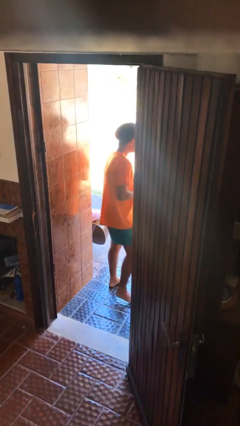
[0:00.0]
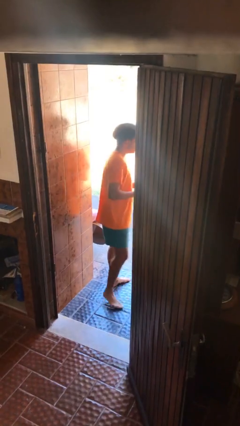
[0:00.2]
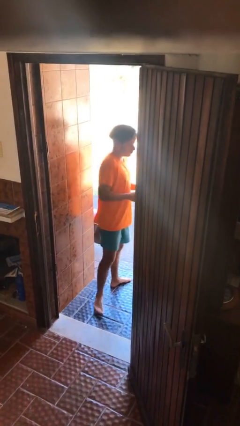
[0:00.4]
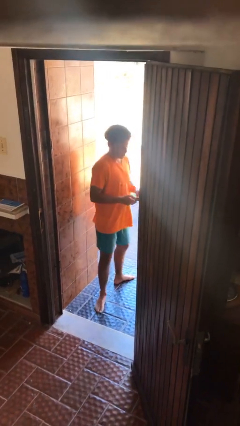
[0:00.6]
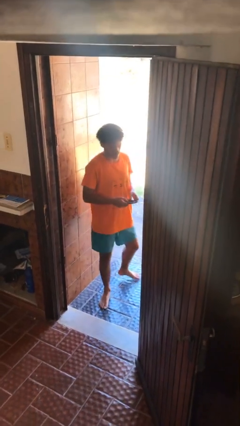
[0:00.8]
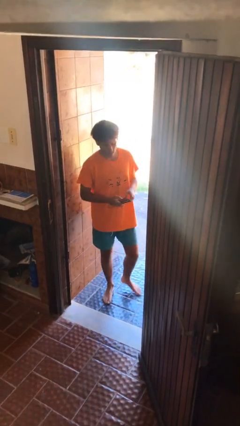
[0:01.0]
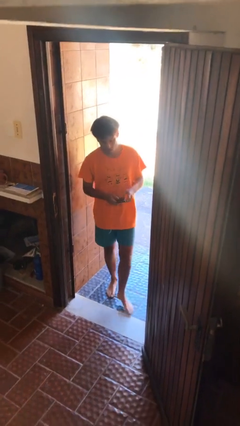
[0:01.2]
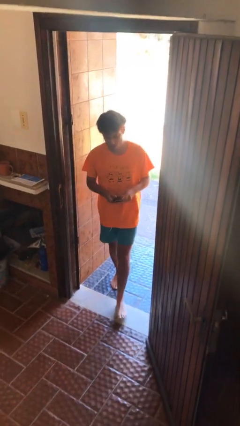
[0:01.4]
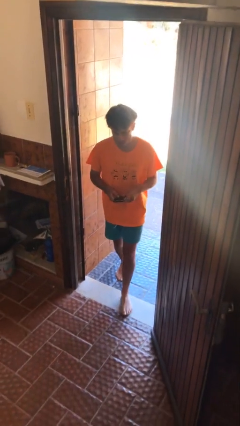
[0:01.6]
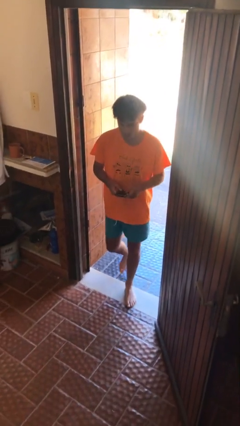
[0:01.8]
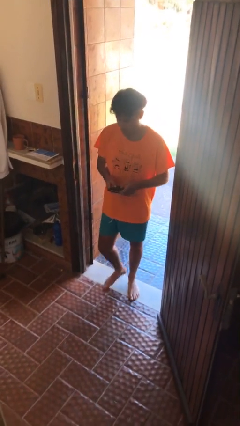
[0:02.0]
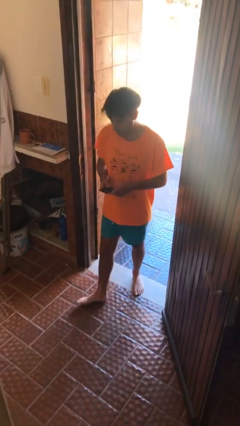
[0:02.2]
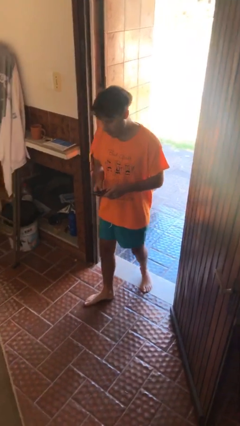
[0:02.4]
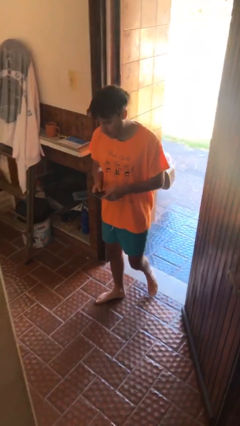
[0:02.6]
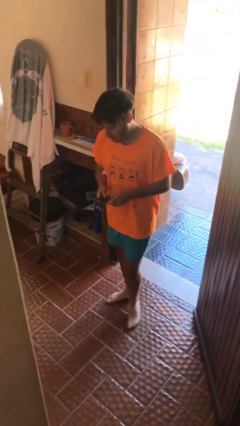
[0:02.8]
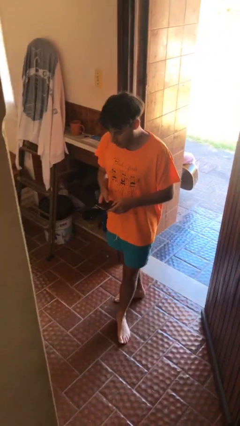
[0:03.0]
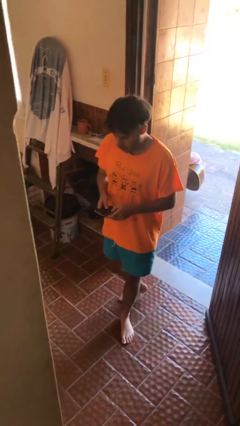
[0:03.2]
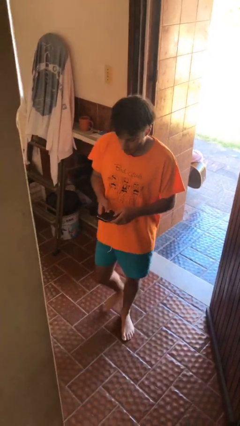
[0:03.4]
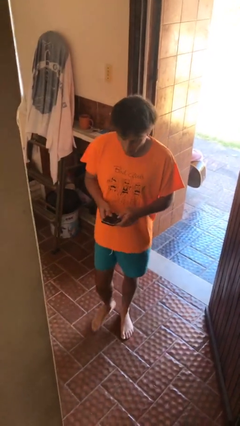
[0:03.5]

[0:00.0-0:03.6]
person enters scene through structure

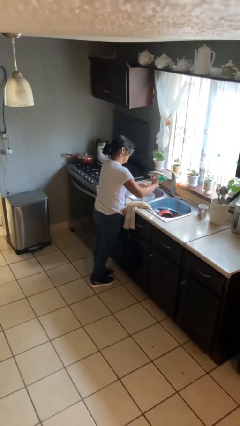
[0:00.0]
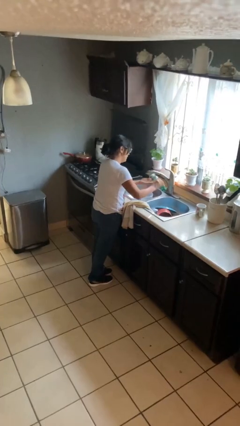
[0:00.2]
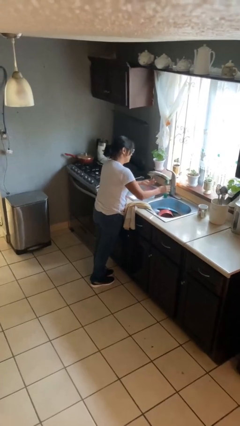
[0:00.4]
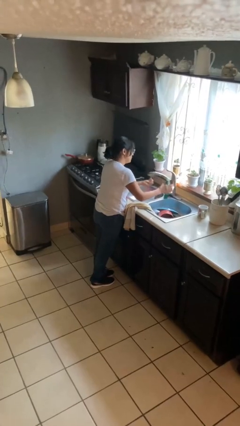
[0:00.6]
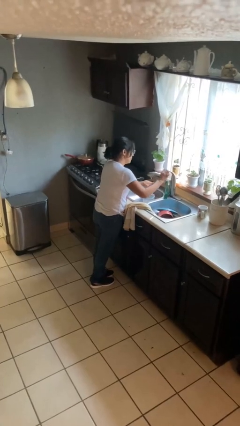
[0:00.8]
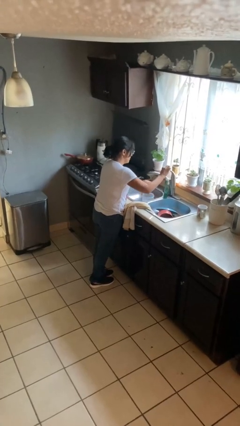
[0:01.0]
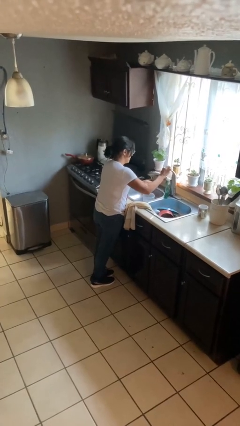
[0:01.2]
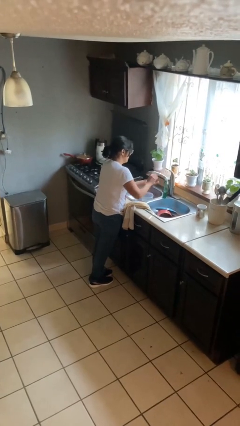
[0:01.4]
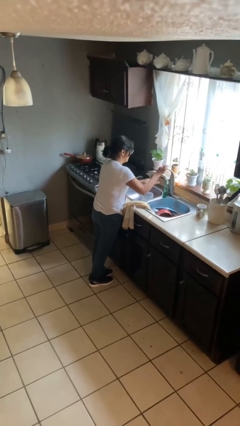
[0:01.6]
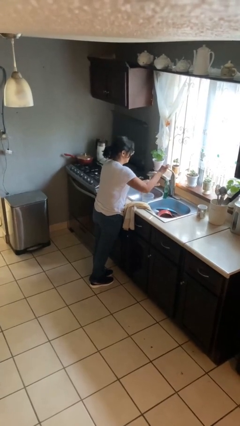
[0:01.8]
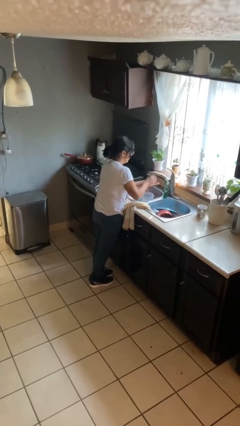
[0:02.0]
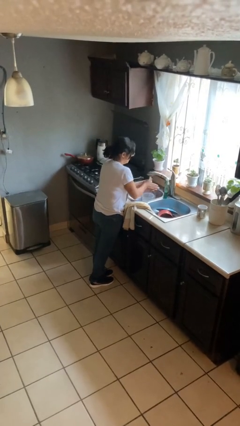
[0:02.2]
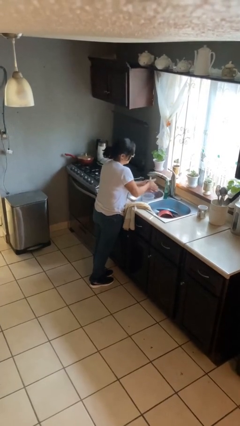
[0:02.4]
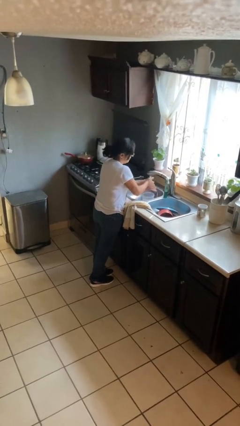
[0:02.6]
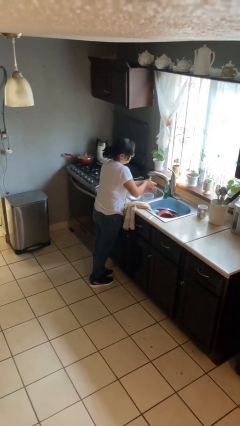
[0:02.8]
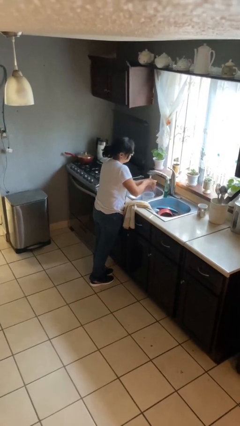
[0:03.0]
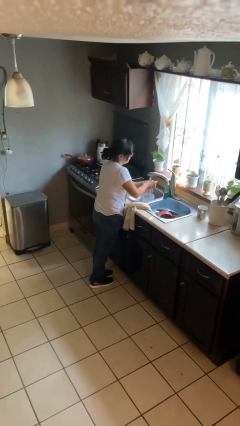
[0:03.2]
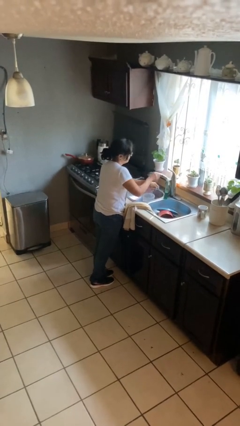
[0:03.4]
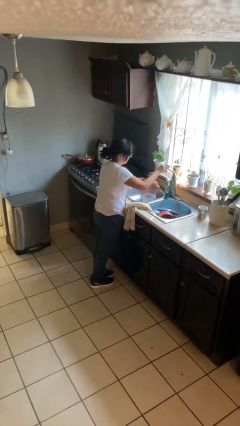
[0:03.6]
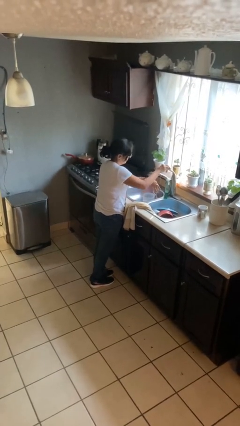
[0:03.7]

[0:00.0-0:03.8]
person washes hands

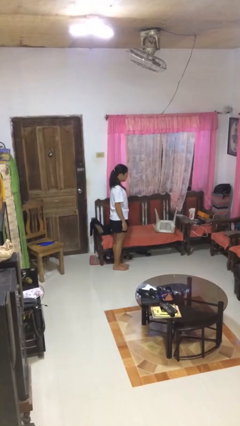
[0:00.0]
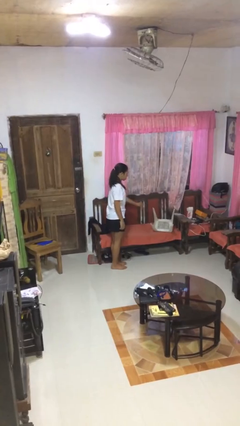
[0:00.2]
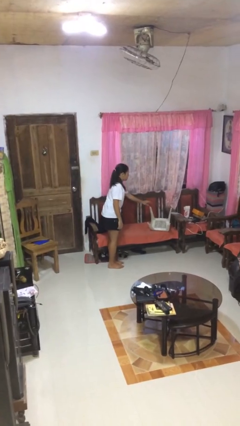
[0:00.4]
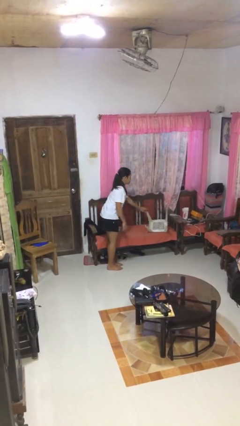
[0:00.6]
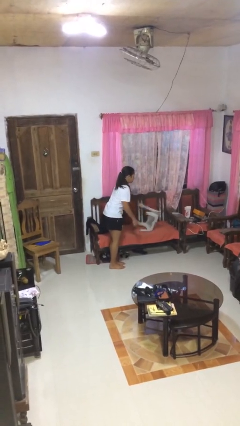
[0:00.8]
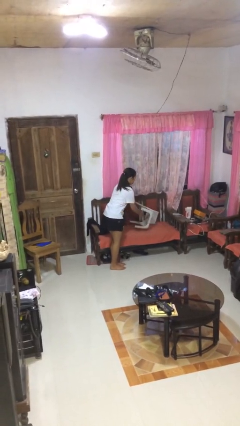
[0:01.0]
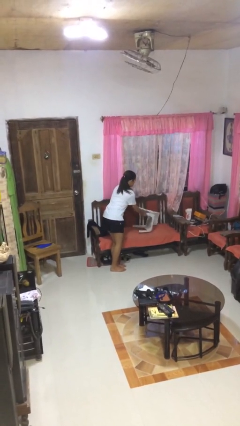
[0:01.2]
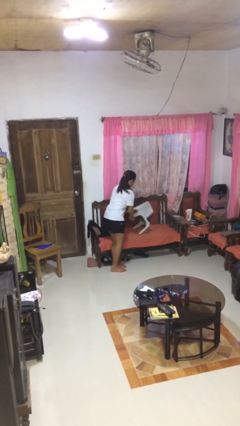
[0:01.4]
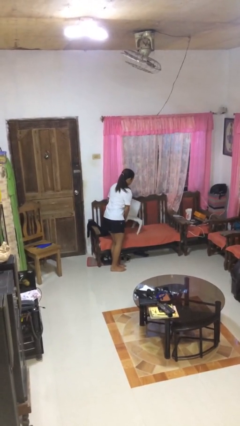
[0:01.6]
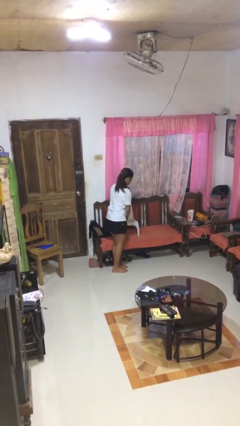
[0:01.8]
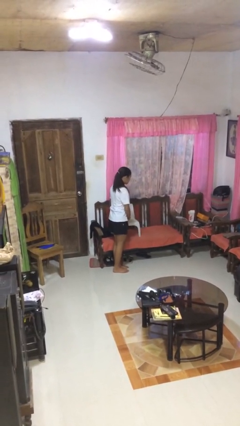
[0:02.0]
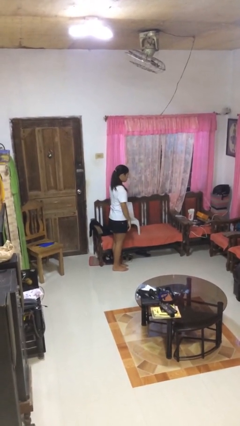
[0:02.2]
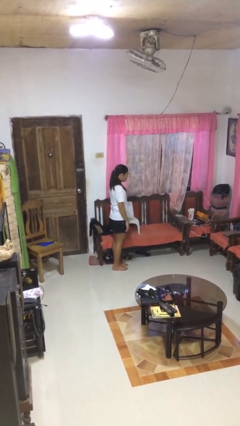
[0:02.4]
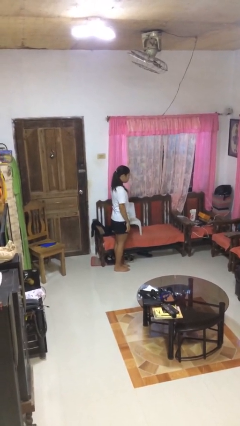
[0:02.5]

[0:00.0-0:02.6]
person sets upright furniture

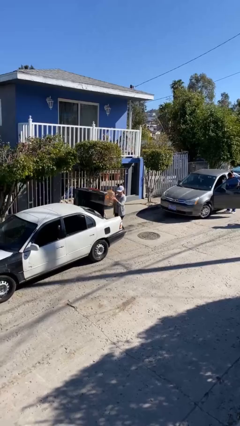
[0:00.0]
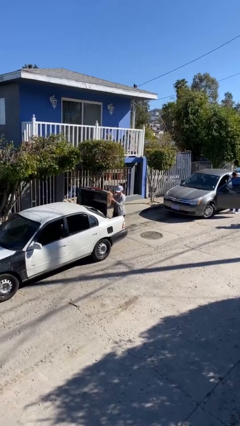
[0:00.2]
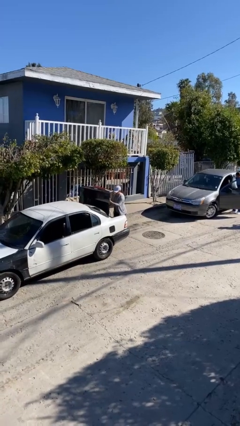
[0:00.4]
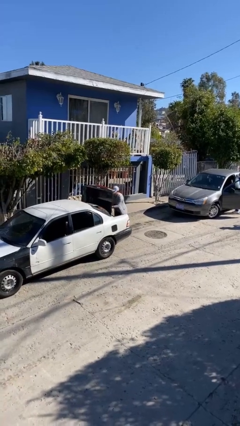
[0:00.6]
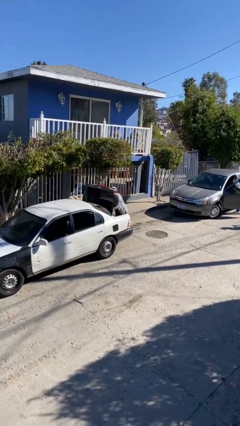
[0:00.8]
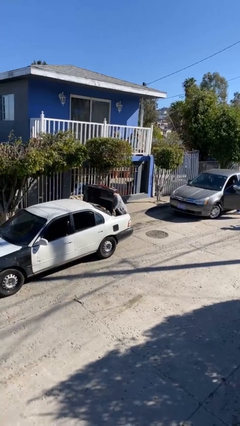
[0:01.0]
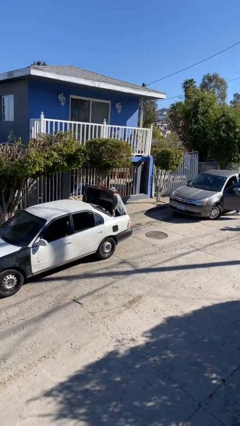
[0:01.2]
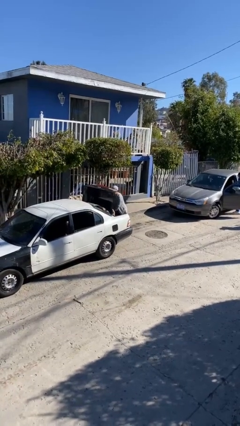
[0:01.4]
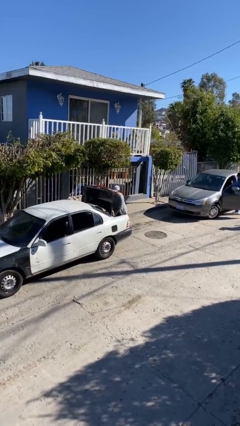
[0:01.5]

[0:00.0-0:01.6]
person loads car

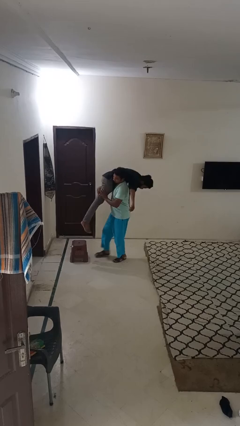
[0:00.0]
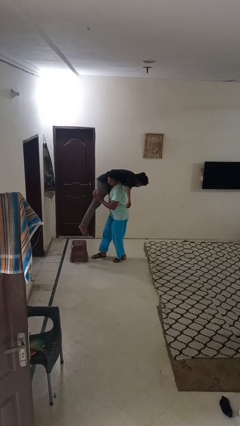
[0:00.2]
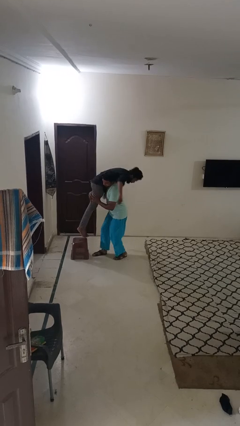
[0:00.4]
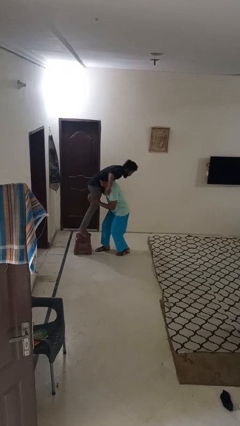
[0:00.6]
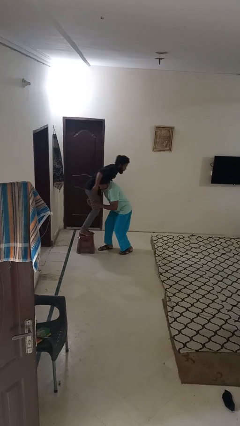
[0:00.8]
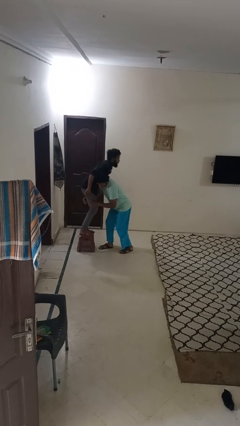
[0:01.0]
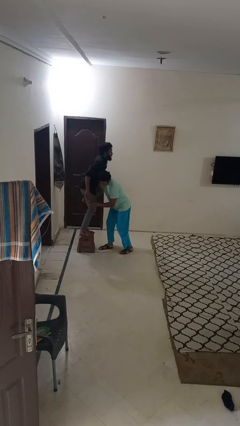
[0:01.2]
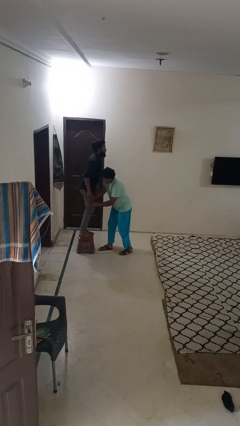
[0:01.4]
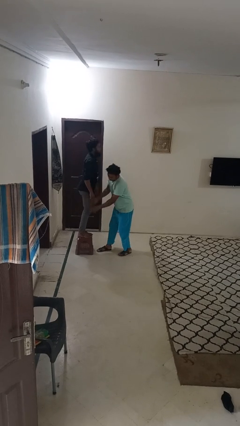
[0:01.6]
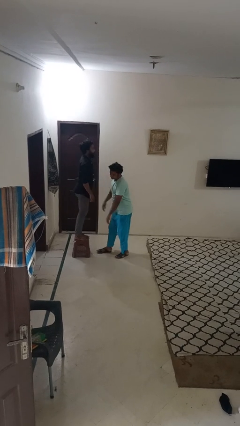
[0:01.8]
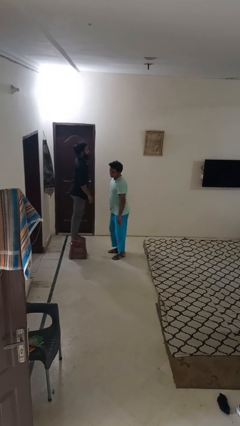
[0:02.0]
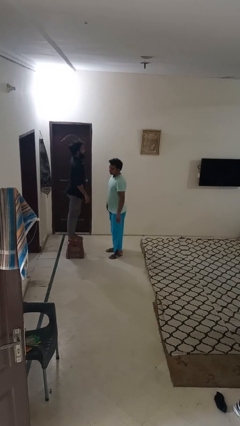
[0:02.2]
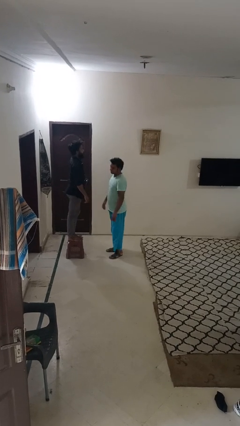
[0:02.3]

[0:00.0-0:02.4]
person puts down person

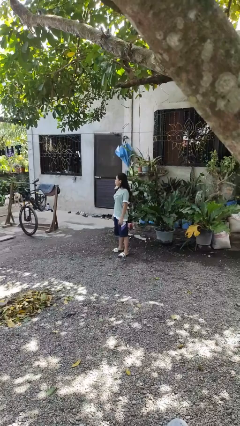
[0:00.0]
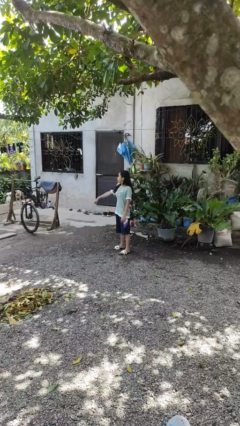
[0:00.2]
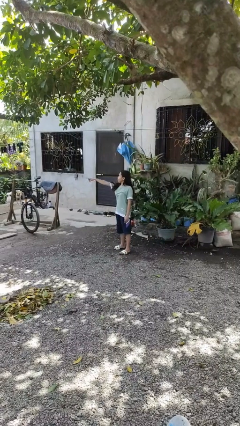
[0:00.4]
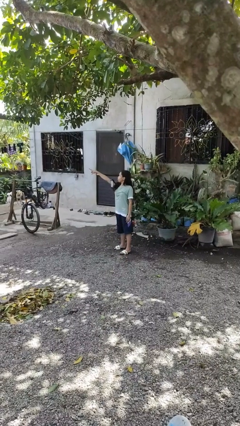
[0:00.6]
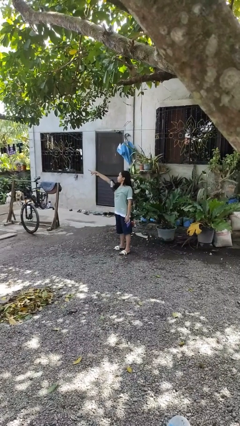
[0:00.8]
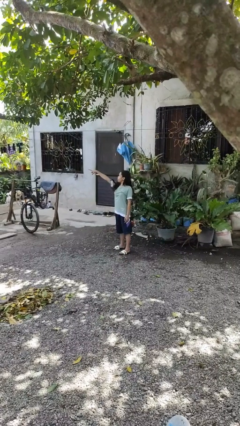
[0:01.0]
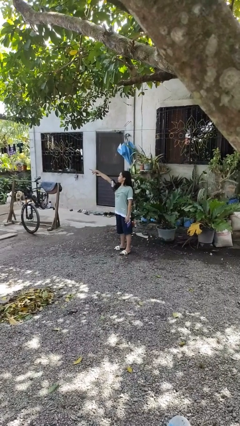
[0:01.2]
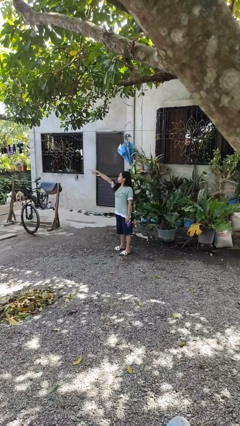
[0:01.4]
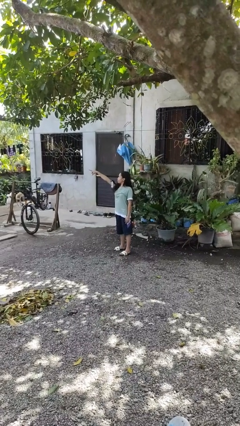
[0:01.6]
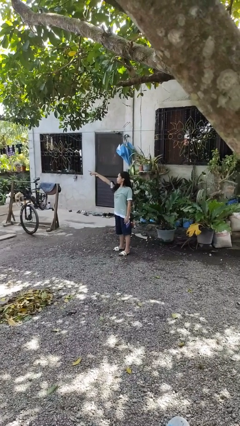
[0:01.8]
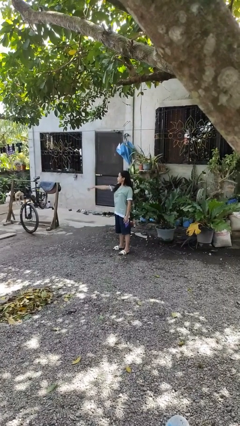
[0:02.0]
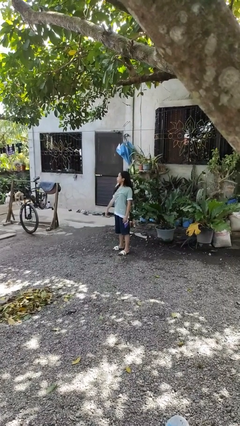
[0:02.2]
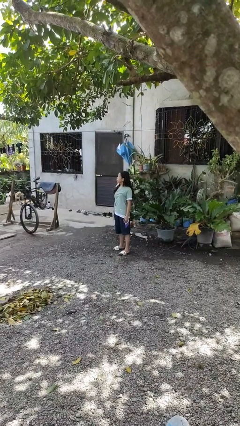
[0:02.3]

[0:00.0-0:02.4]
person points at person

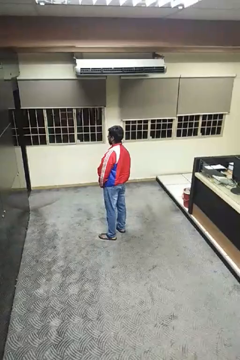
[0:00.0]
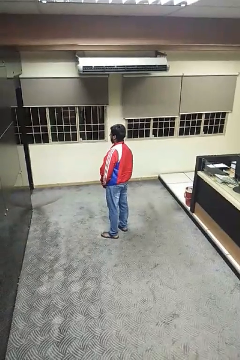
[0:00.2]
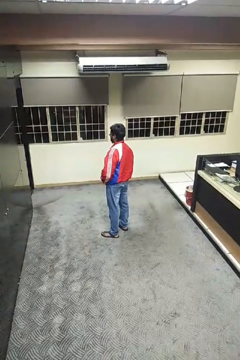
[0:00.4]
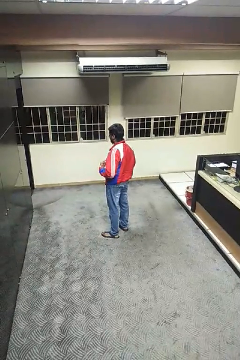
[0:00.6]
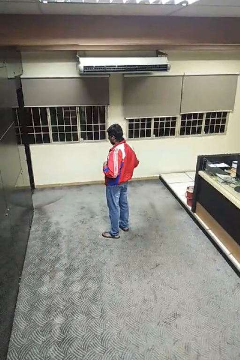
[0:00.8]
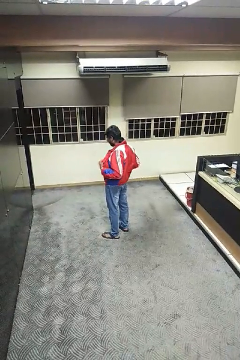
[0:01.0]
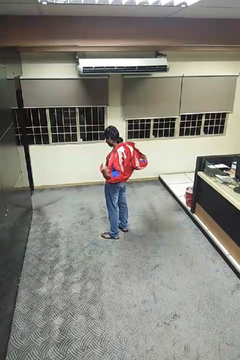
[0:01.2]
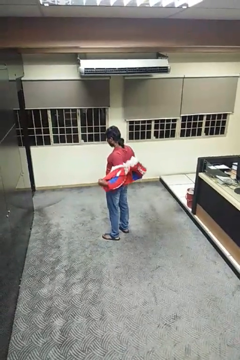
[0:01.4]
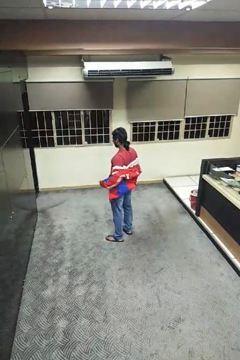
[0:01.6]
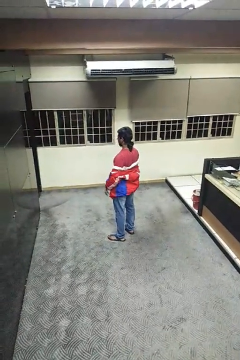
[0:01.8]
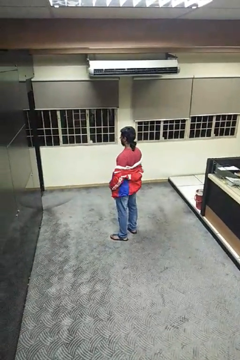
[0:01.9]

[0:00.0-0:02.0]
person takes off jacket
